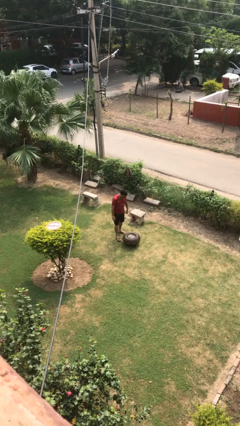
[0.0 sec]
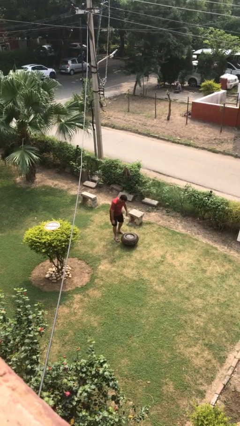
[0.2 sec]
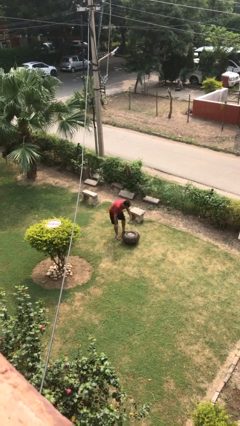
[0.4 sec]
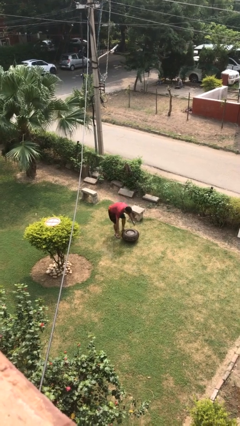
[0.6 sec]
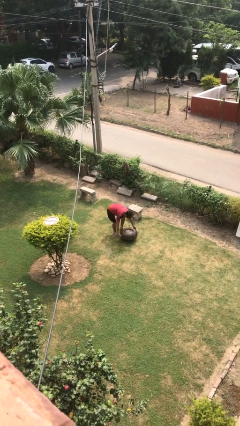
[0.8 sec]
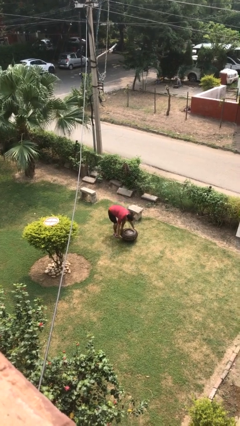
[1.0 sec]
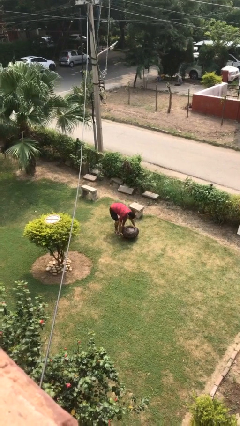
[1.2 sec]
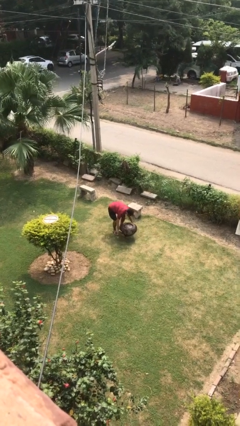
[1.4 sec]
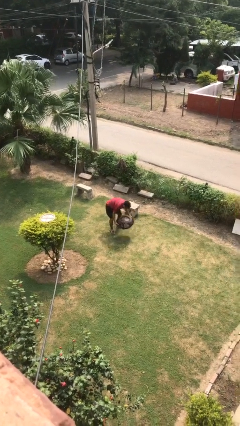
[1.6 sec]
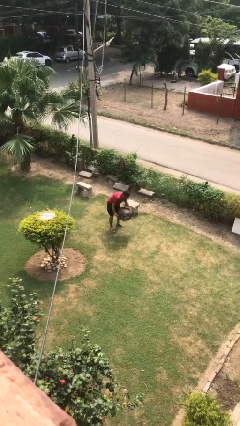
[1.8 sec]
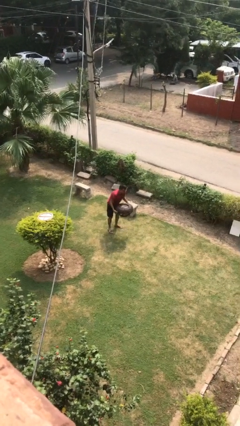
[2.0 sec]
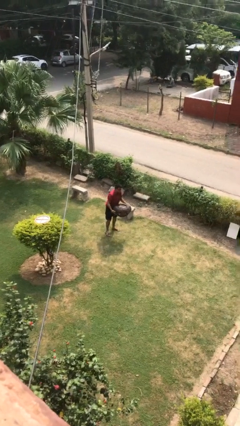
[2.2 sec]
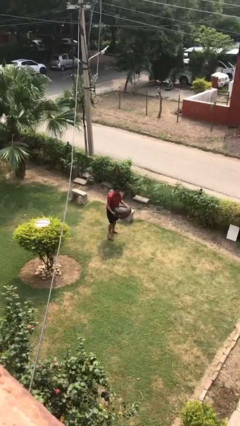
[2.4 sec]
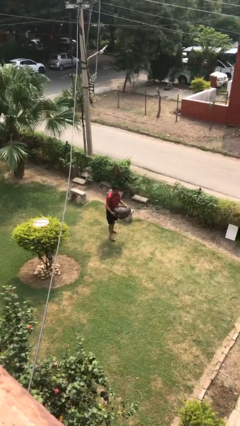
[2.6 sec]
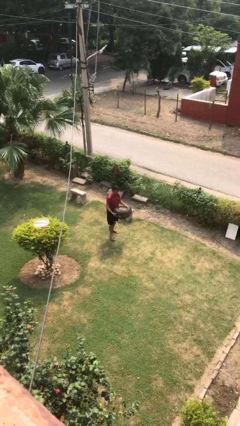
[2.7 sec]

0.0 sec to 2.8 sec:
person picks up object from floor

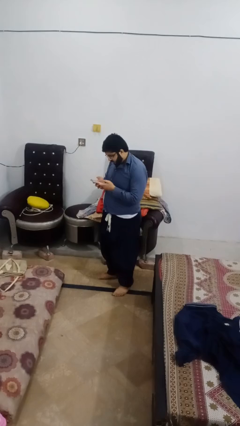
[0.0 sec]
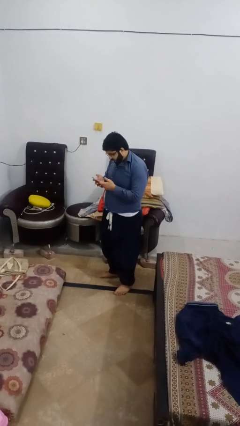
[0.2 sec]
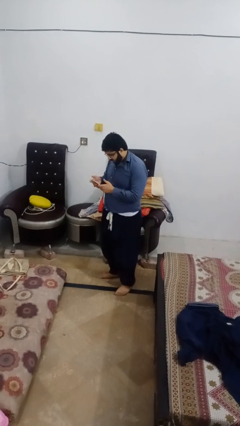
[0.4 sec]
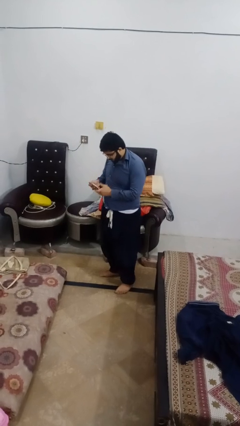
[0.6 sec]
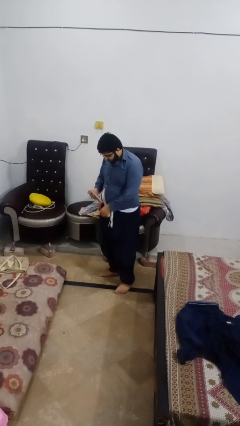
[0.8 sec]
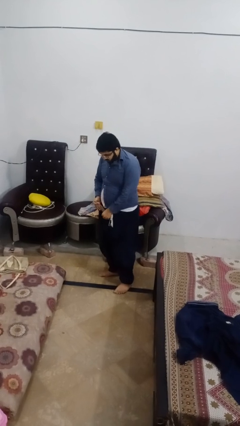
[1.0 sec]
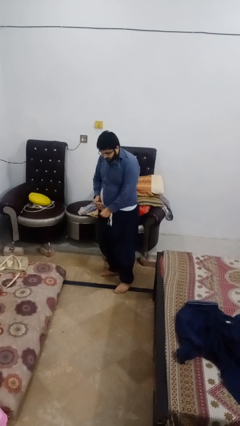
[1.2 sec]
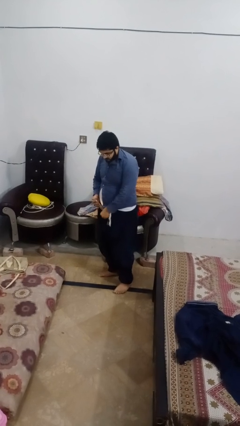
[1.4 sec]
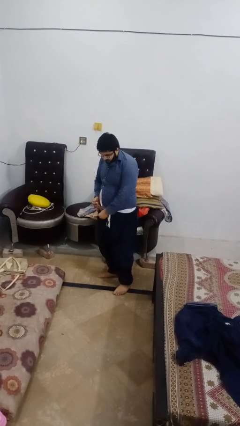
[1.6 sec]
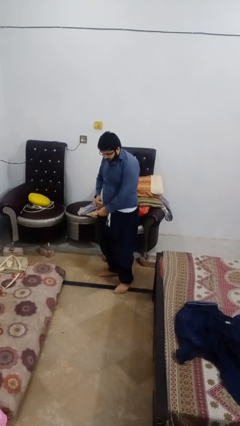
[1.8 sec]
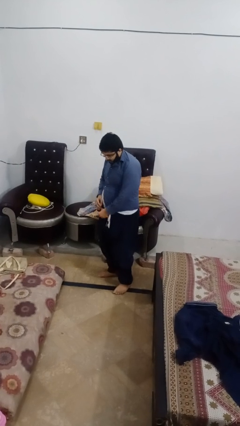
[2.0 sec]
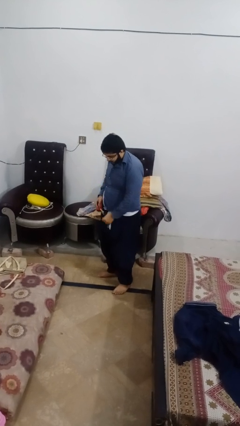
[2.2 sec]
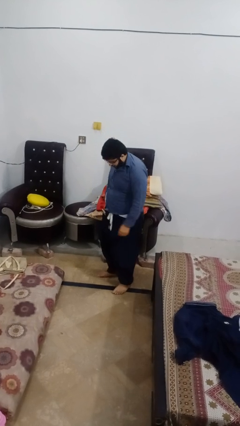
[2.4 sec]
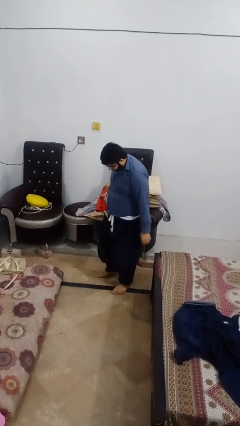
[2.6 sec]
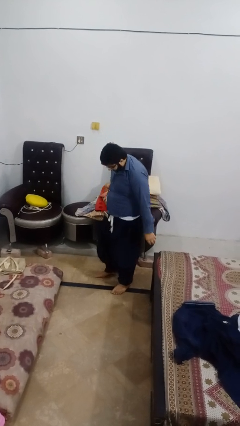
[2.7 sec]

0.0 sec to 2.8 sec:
person puts phone into pocket

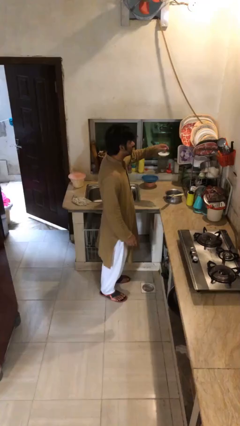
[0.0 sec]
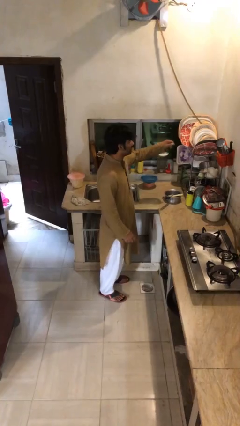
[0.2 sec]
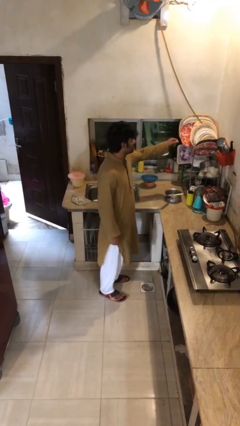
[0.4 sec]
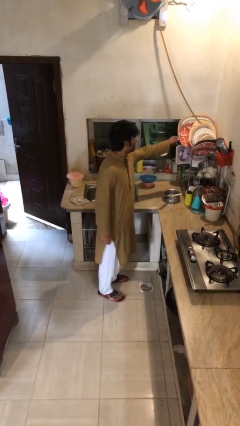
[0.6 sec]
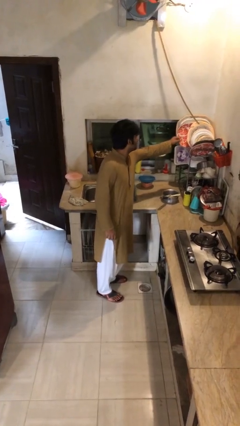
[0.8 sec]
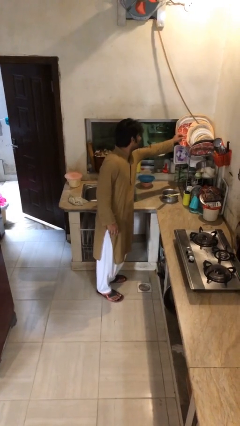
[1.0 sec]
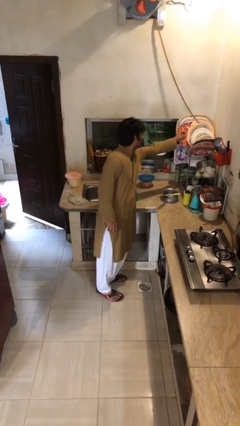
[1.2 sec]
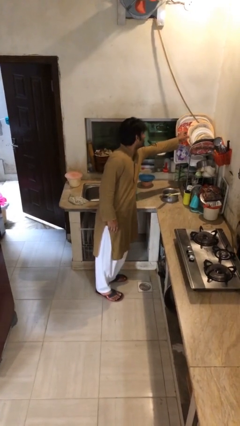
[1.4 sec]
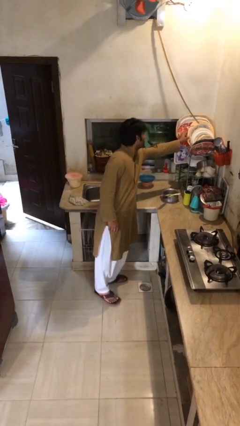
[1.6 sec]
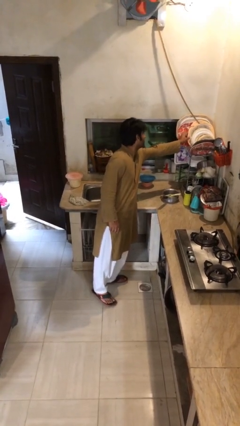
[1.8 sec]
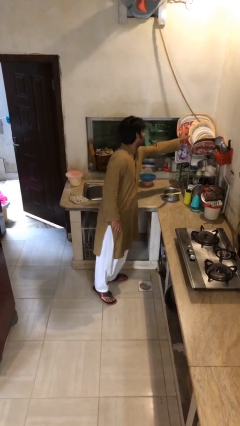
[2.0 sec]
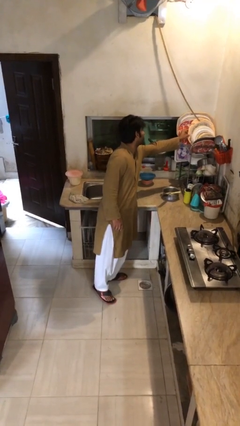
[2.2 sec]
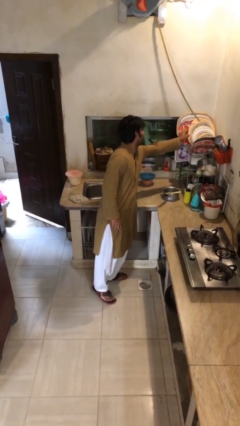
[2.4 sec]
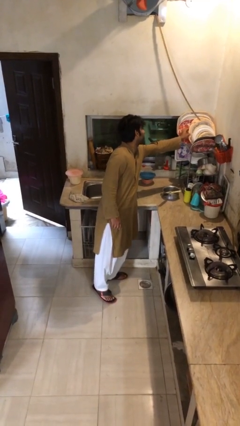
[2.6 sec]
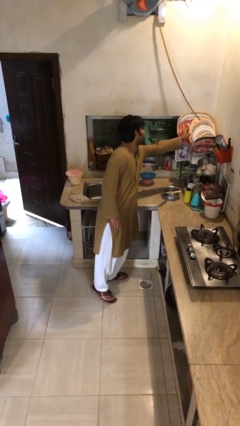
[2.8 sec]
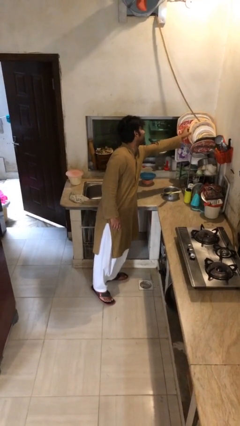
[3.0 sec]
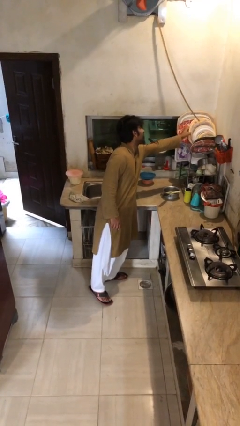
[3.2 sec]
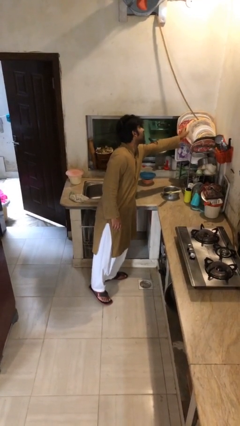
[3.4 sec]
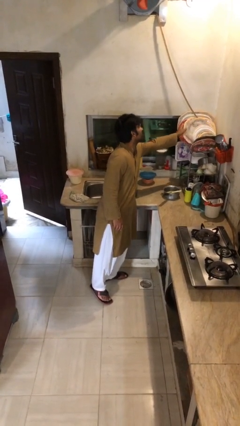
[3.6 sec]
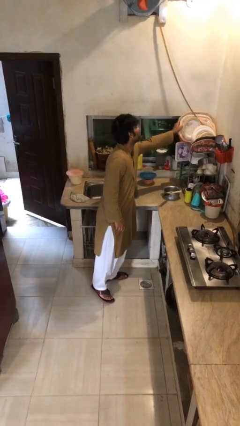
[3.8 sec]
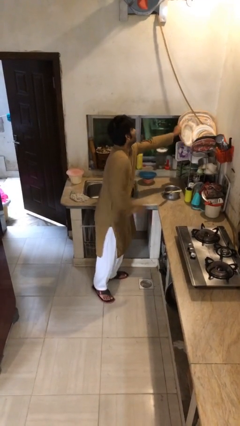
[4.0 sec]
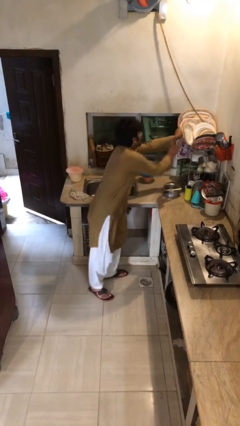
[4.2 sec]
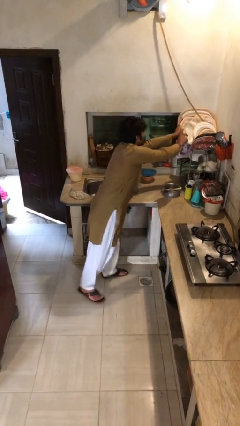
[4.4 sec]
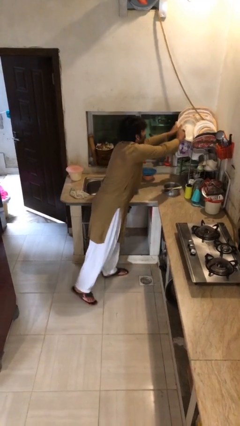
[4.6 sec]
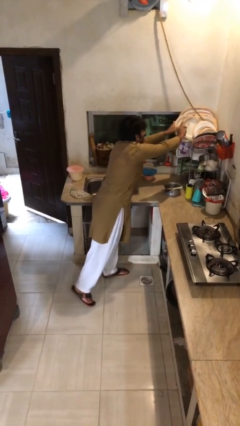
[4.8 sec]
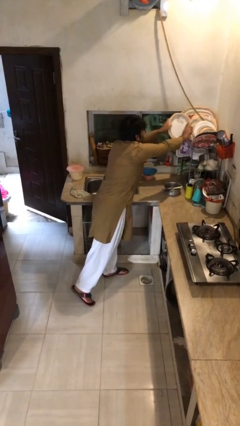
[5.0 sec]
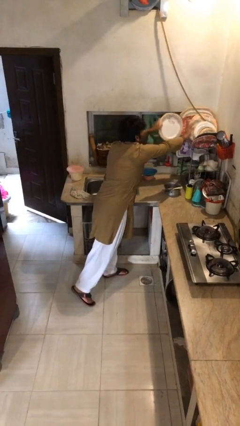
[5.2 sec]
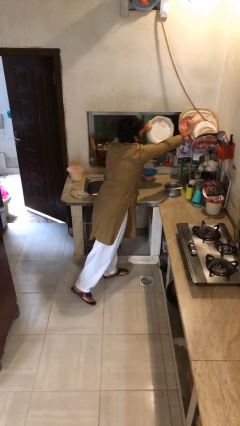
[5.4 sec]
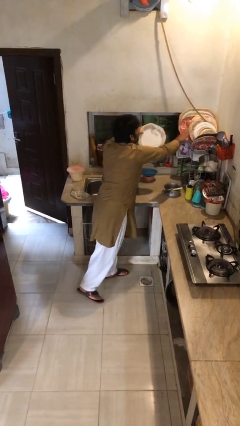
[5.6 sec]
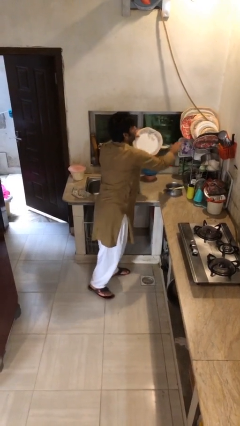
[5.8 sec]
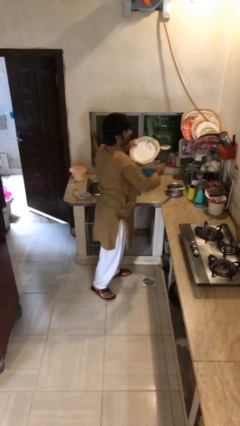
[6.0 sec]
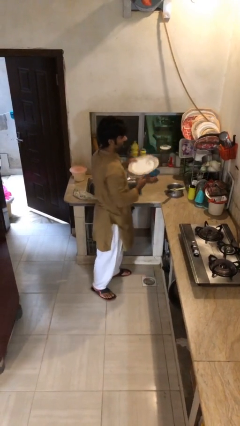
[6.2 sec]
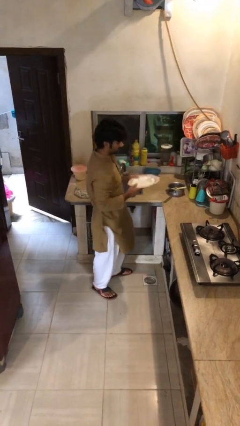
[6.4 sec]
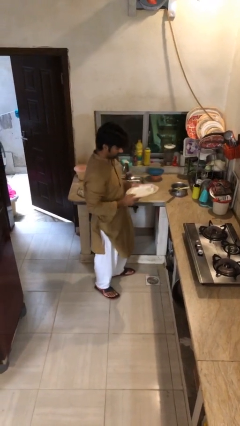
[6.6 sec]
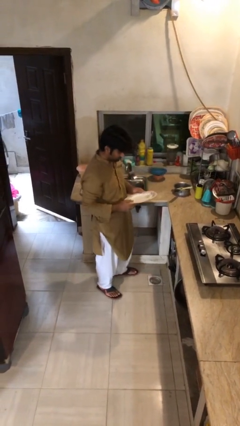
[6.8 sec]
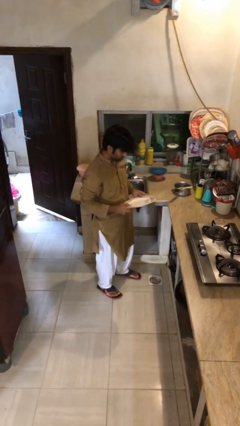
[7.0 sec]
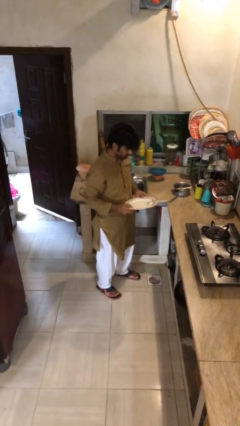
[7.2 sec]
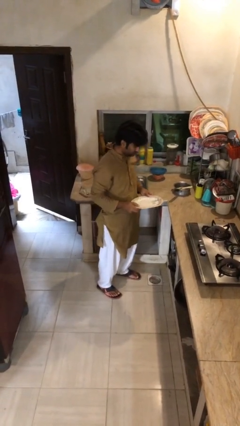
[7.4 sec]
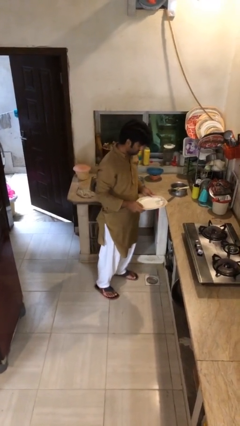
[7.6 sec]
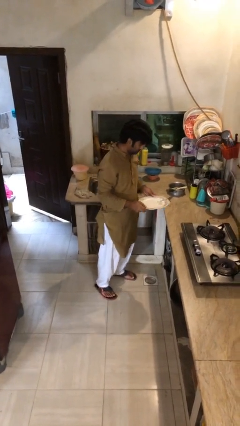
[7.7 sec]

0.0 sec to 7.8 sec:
person picks up object from shelf

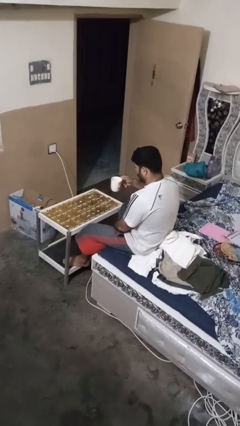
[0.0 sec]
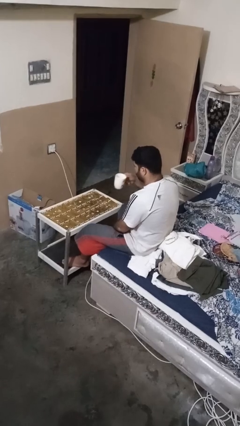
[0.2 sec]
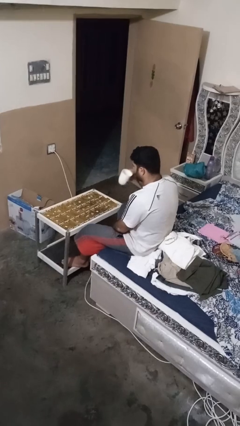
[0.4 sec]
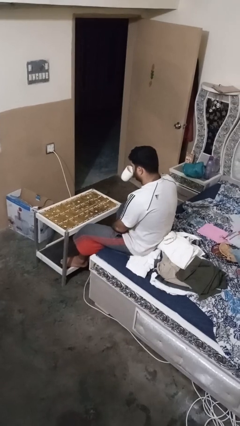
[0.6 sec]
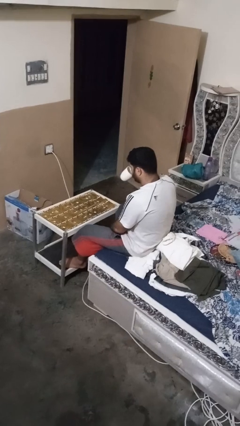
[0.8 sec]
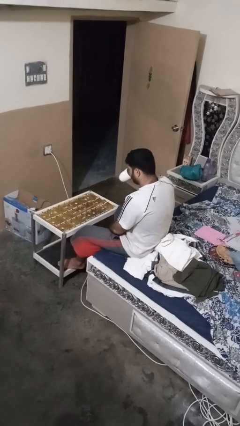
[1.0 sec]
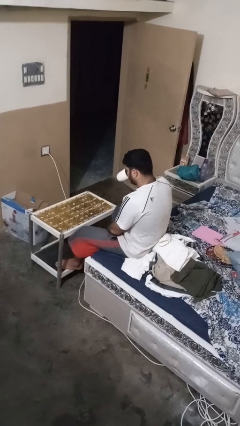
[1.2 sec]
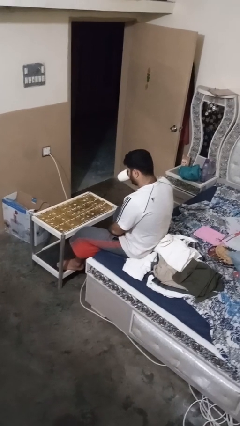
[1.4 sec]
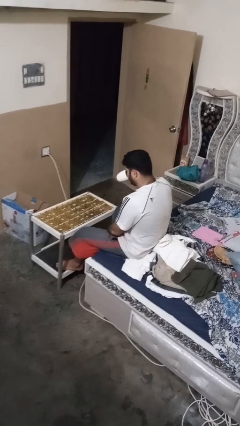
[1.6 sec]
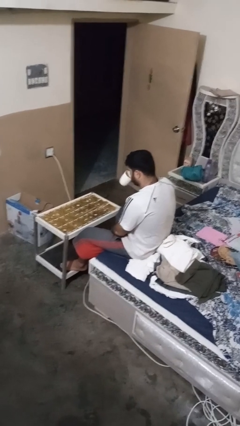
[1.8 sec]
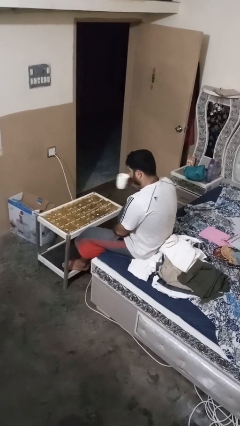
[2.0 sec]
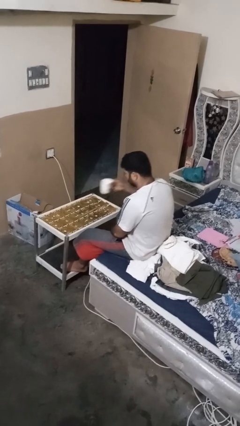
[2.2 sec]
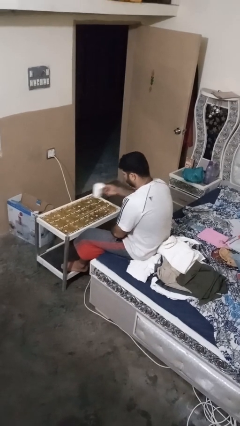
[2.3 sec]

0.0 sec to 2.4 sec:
person drinks from mug

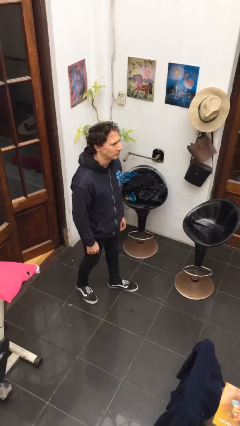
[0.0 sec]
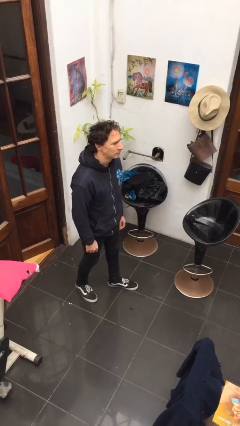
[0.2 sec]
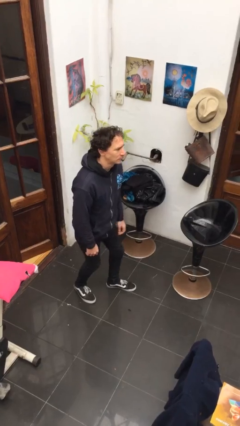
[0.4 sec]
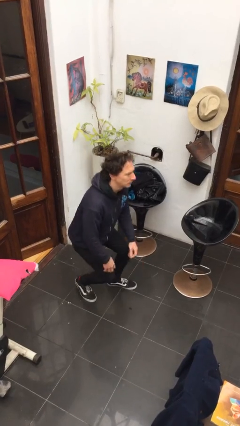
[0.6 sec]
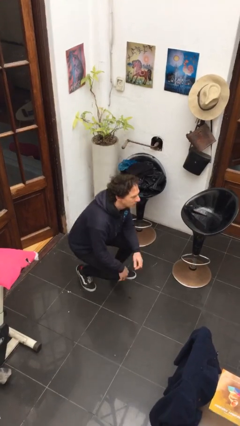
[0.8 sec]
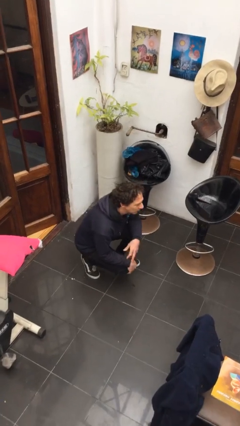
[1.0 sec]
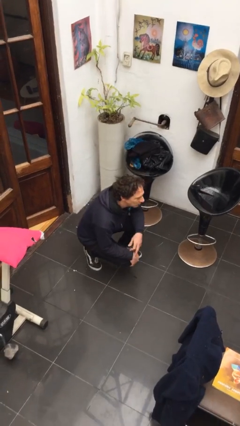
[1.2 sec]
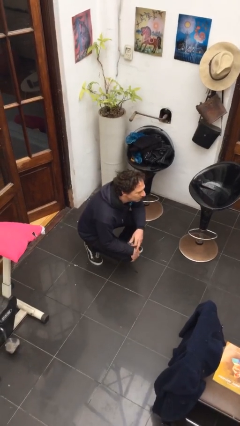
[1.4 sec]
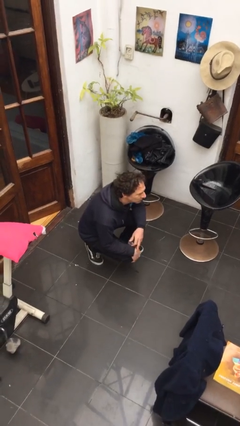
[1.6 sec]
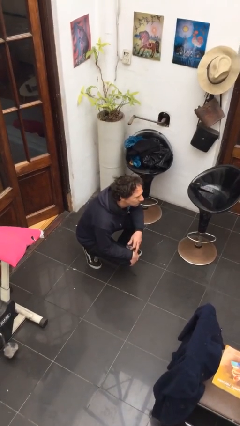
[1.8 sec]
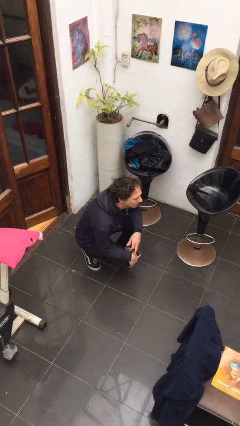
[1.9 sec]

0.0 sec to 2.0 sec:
person squats
